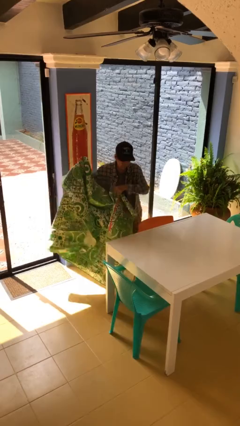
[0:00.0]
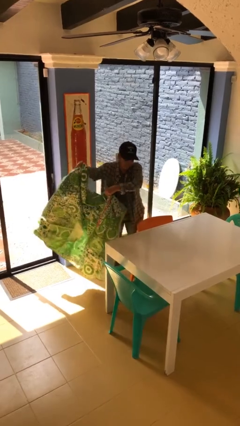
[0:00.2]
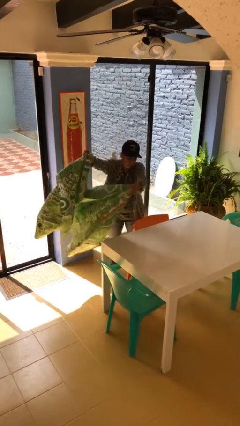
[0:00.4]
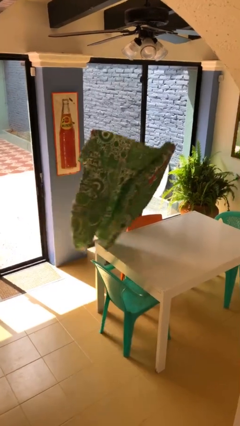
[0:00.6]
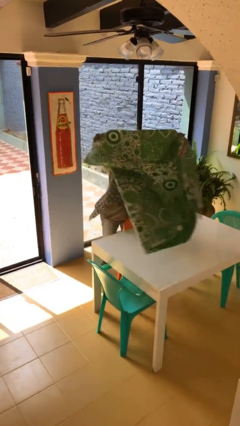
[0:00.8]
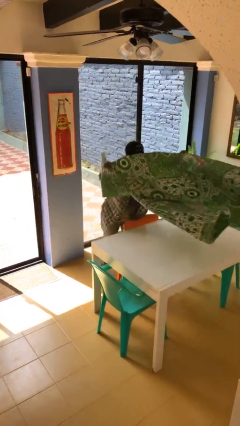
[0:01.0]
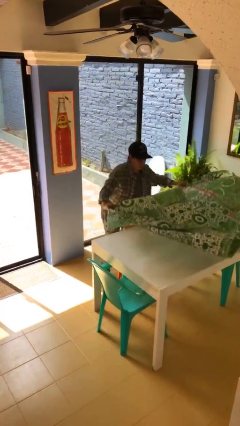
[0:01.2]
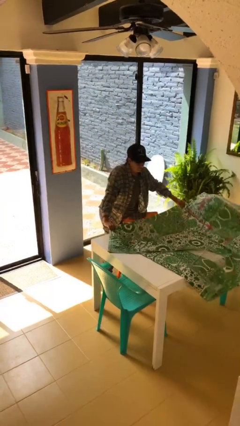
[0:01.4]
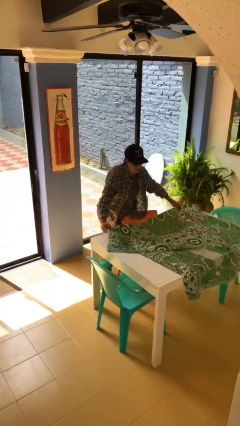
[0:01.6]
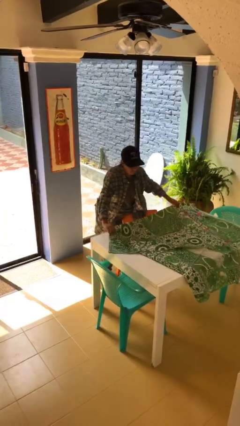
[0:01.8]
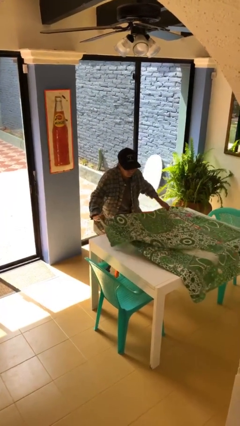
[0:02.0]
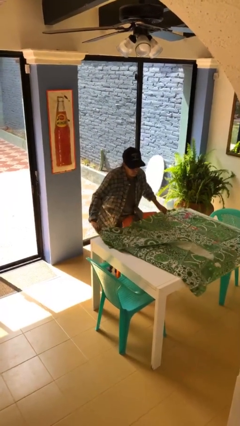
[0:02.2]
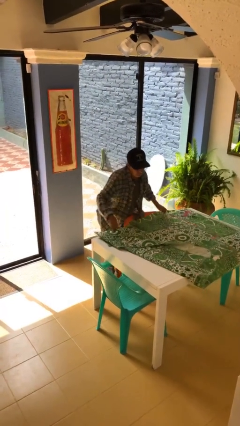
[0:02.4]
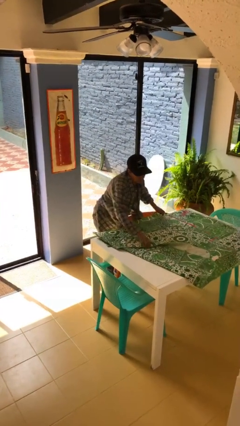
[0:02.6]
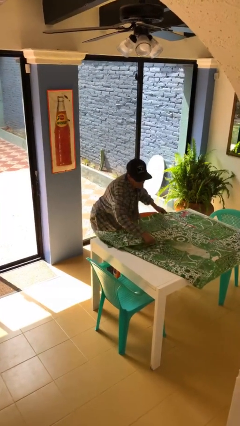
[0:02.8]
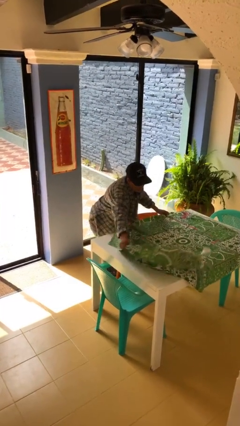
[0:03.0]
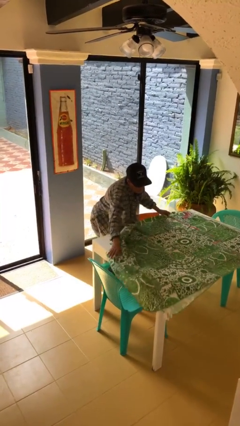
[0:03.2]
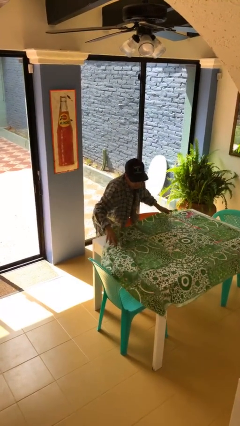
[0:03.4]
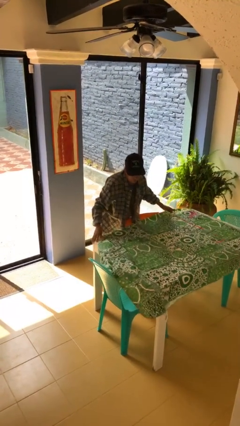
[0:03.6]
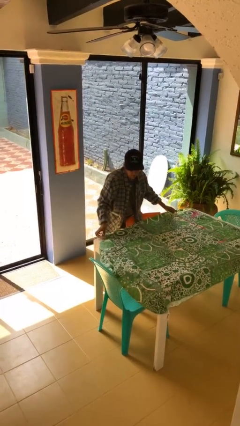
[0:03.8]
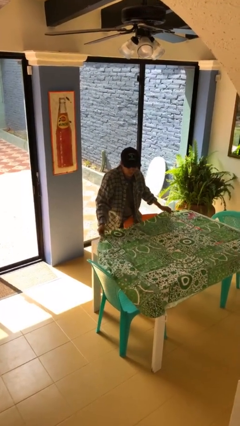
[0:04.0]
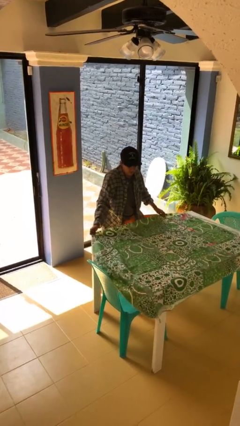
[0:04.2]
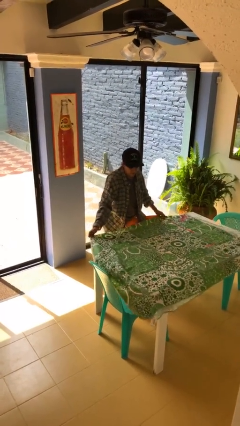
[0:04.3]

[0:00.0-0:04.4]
person spreads tablecloth

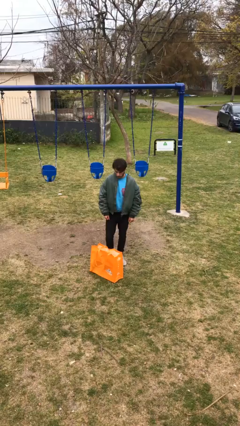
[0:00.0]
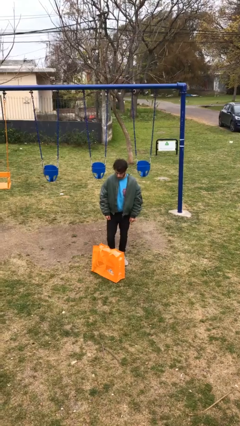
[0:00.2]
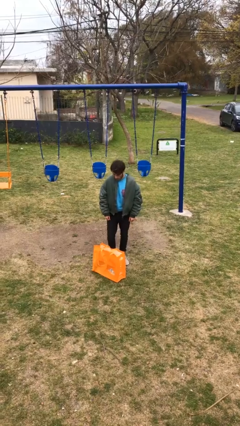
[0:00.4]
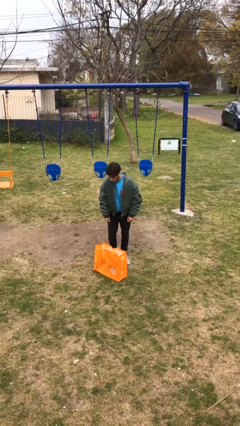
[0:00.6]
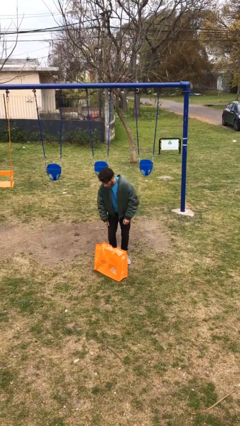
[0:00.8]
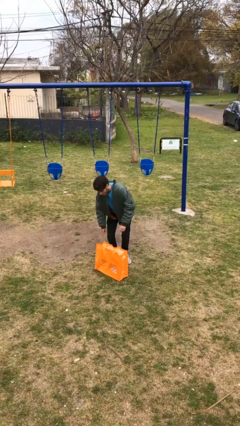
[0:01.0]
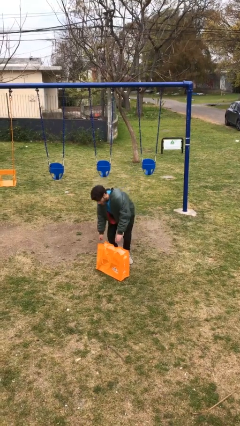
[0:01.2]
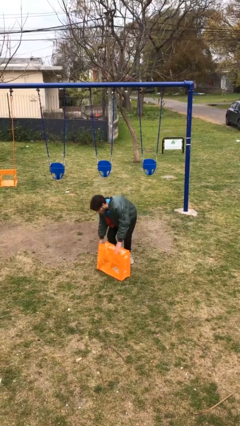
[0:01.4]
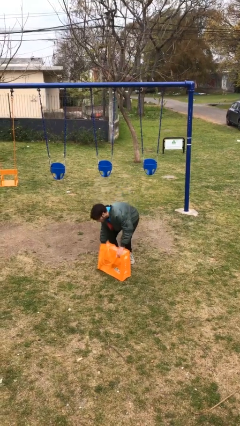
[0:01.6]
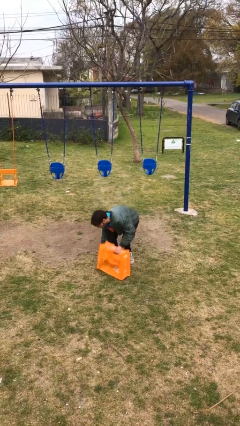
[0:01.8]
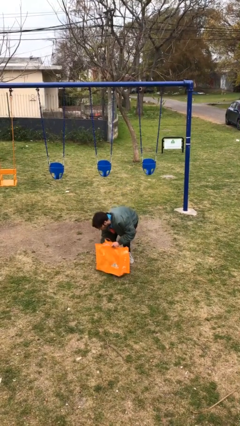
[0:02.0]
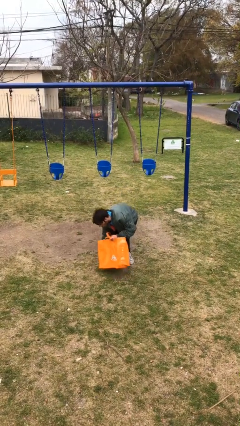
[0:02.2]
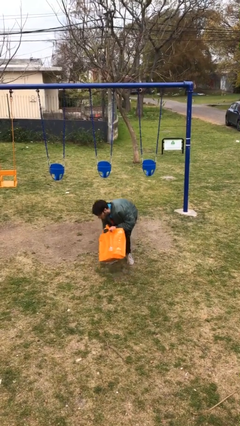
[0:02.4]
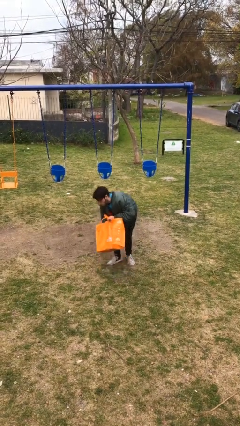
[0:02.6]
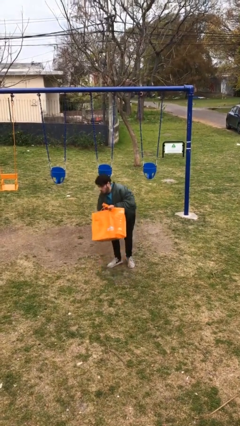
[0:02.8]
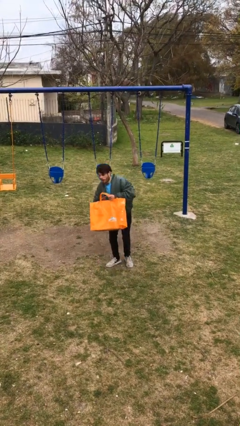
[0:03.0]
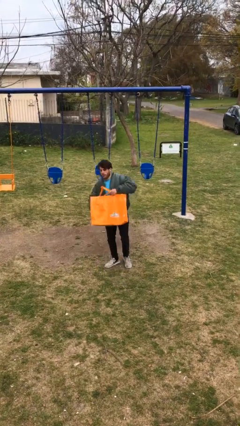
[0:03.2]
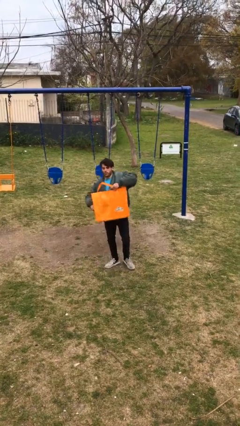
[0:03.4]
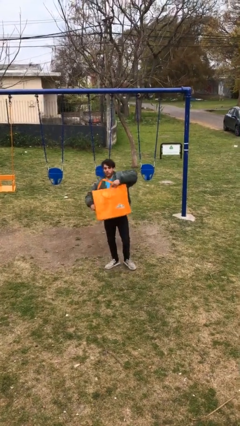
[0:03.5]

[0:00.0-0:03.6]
person picks up object from floor

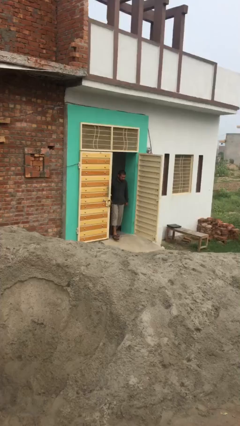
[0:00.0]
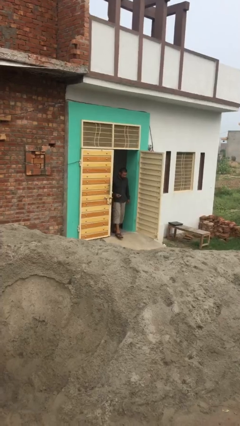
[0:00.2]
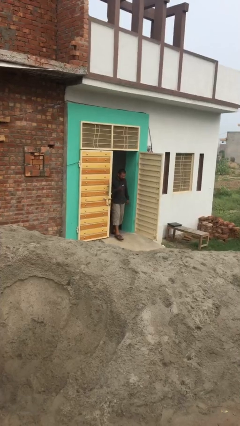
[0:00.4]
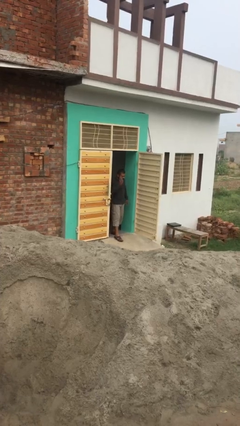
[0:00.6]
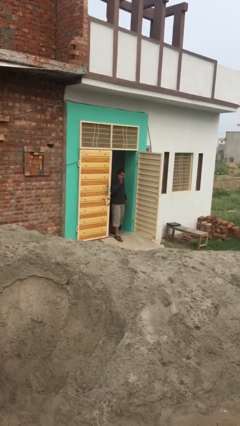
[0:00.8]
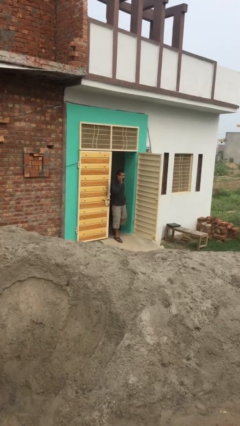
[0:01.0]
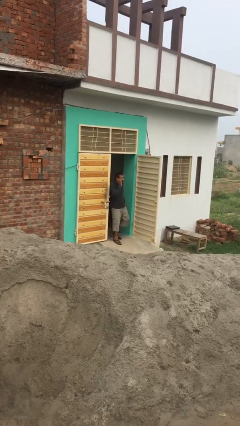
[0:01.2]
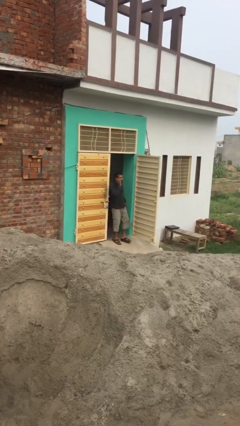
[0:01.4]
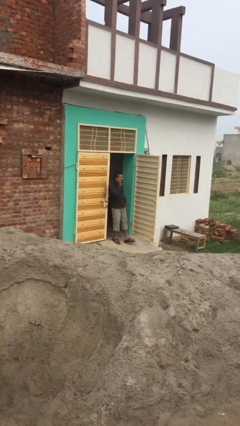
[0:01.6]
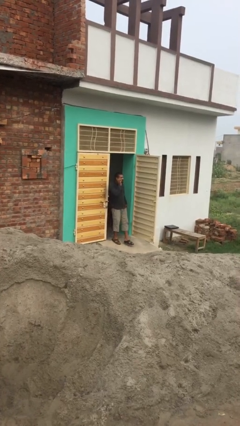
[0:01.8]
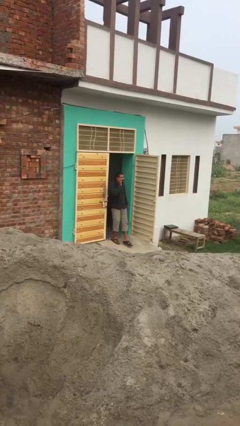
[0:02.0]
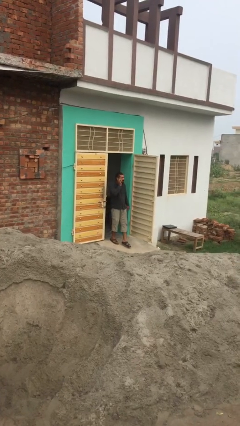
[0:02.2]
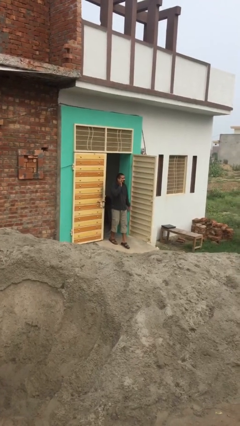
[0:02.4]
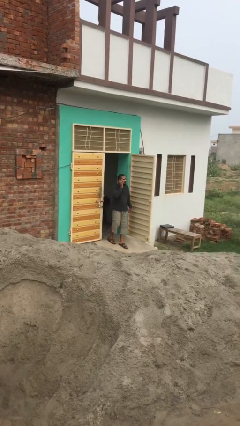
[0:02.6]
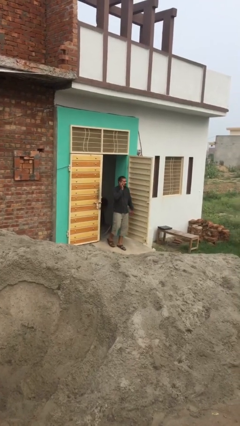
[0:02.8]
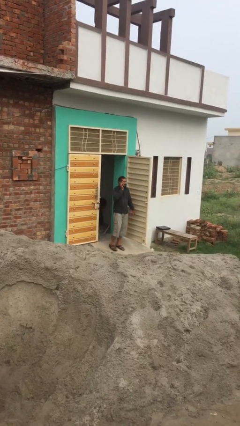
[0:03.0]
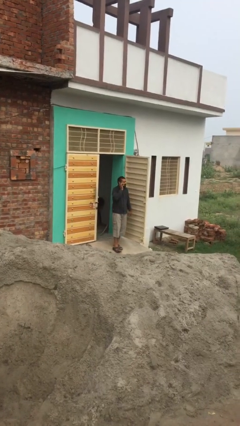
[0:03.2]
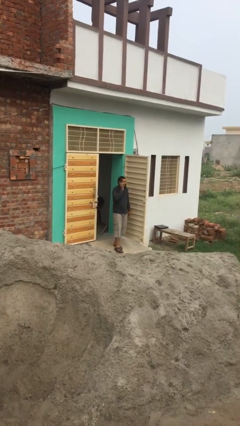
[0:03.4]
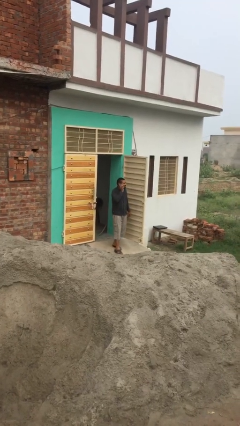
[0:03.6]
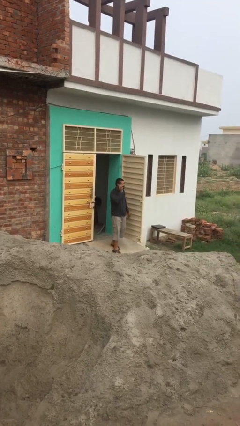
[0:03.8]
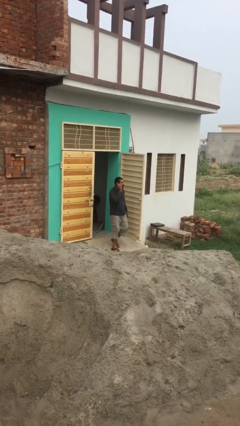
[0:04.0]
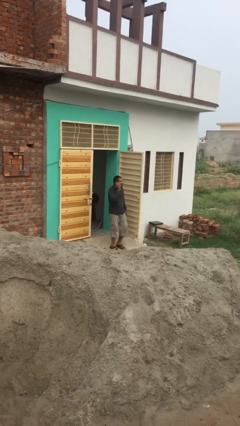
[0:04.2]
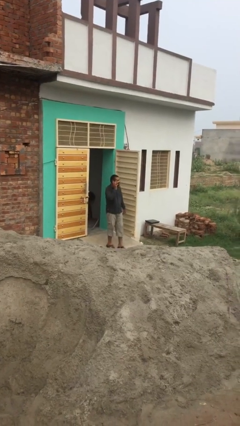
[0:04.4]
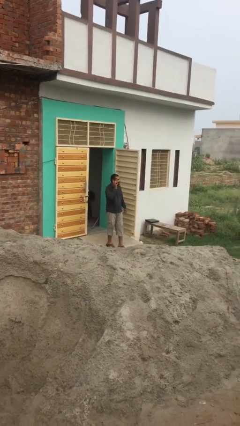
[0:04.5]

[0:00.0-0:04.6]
person enters scene through structure

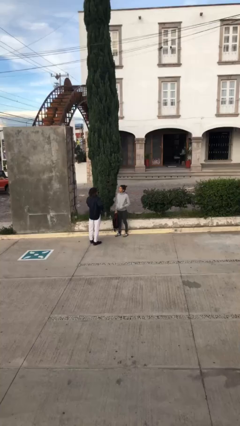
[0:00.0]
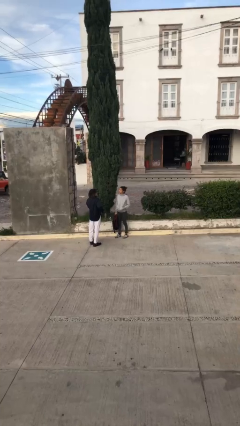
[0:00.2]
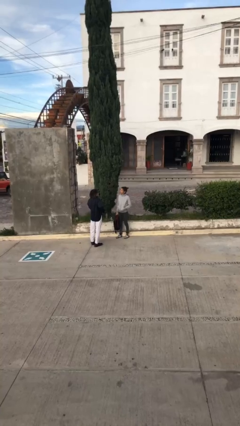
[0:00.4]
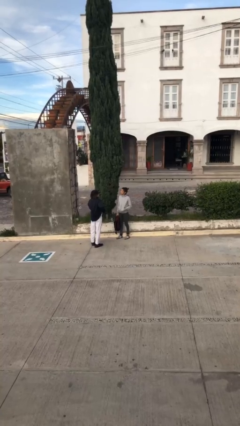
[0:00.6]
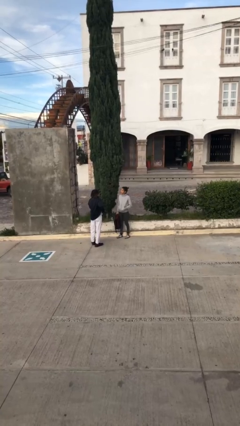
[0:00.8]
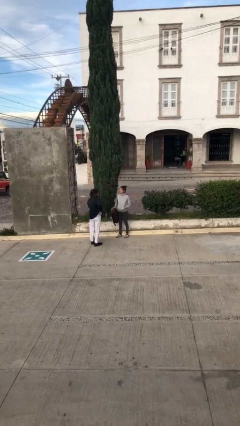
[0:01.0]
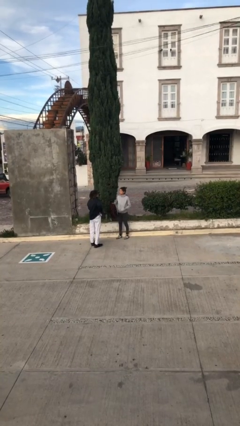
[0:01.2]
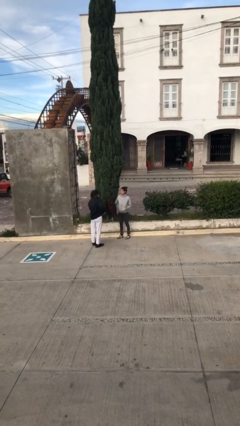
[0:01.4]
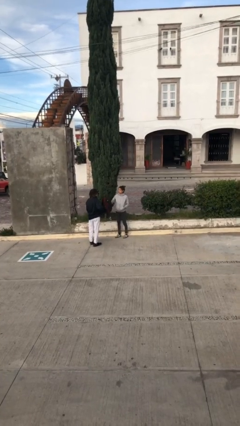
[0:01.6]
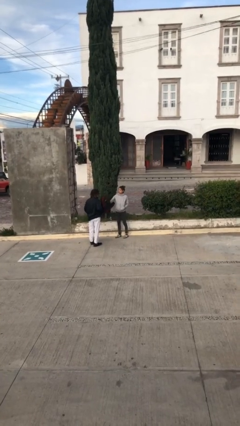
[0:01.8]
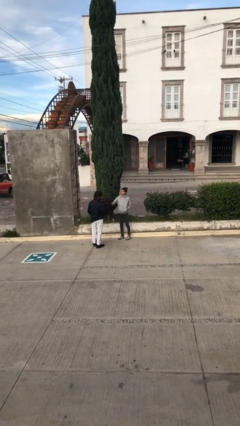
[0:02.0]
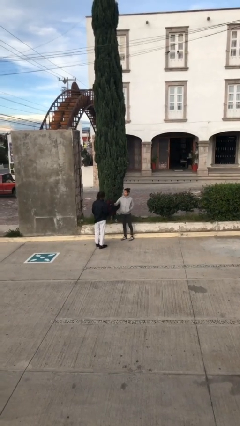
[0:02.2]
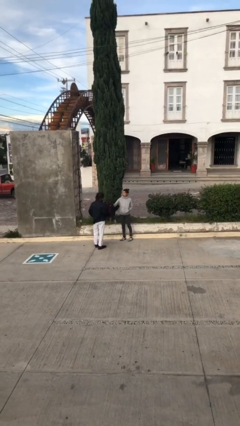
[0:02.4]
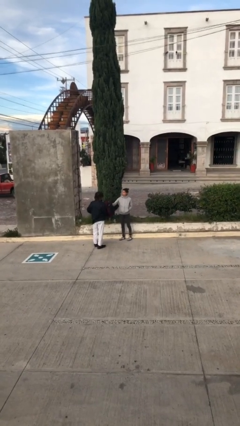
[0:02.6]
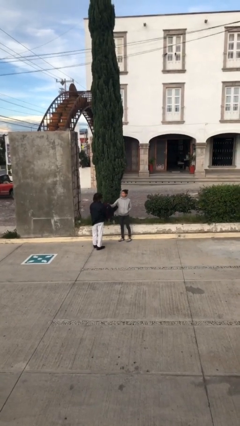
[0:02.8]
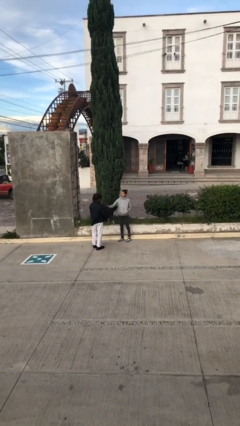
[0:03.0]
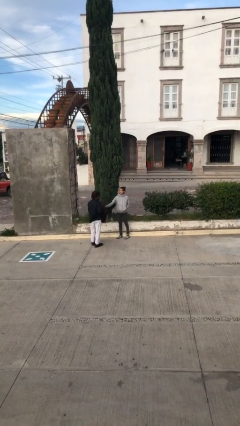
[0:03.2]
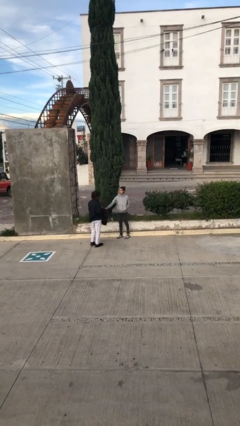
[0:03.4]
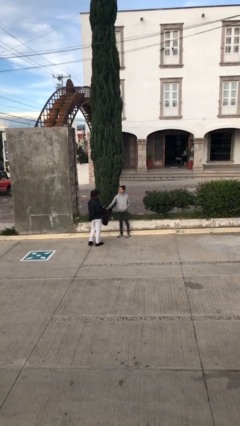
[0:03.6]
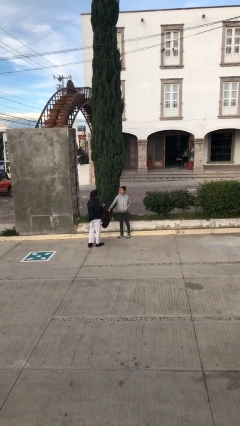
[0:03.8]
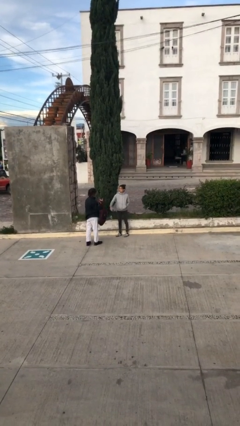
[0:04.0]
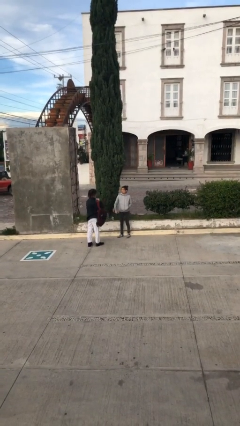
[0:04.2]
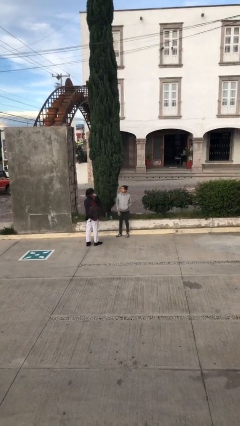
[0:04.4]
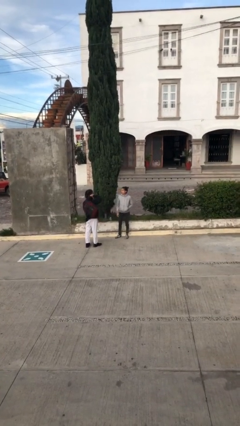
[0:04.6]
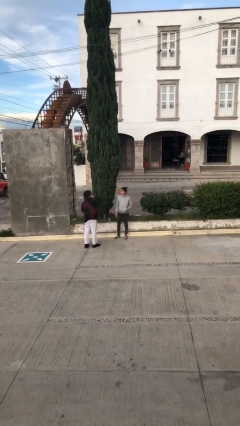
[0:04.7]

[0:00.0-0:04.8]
person transfers object to person

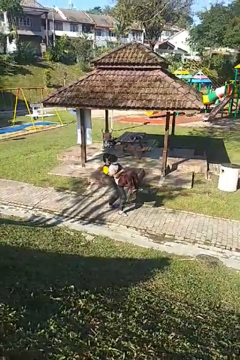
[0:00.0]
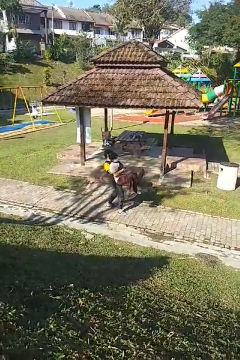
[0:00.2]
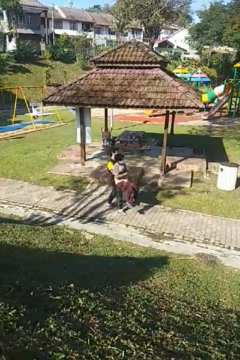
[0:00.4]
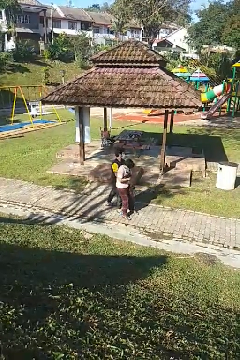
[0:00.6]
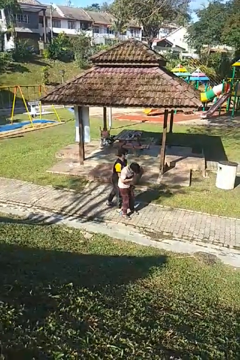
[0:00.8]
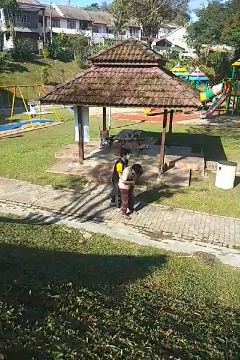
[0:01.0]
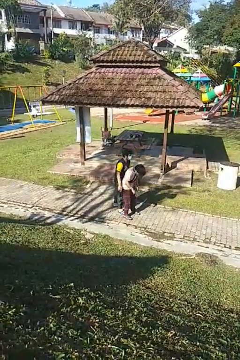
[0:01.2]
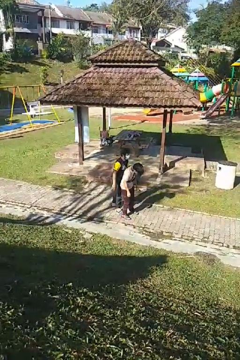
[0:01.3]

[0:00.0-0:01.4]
person puts down person
